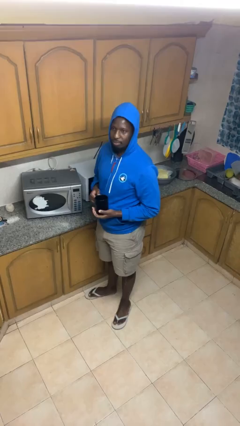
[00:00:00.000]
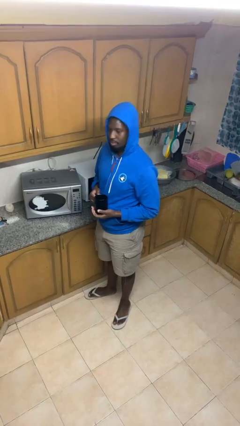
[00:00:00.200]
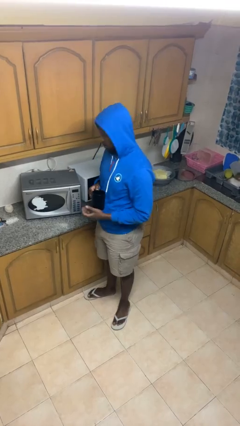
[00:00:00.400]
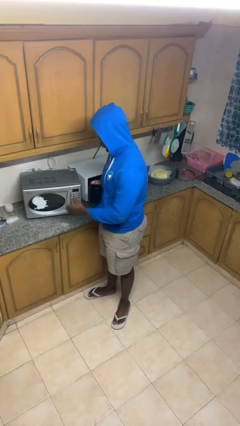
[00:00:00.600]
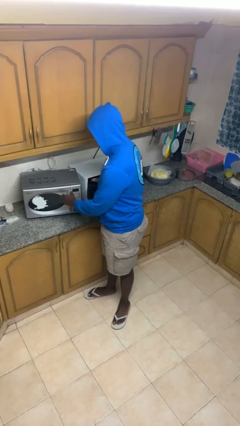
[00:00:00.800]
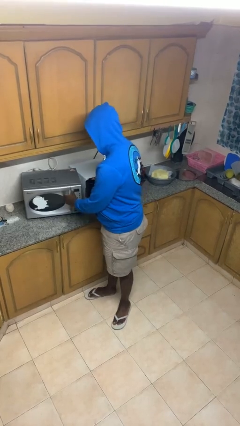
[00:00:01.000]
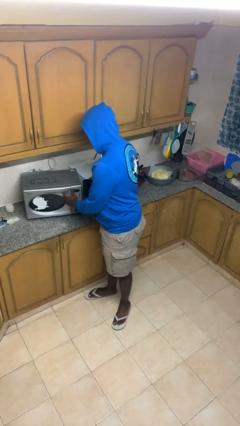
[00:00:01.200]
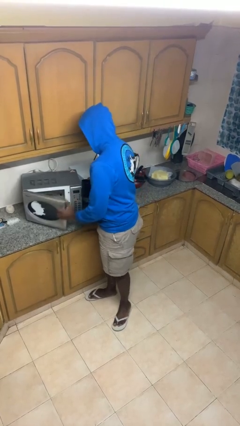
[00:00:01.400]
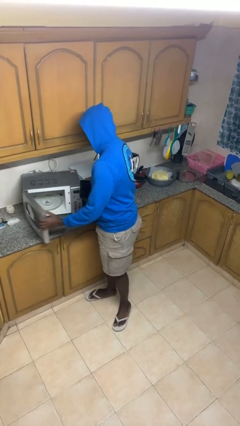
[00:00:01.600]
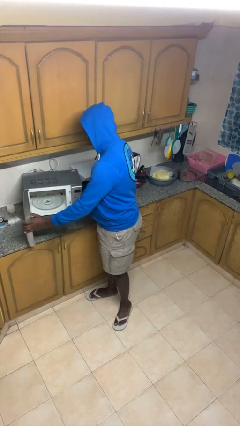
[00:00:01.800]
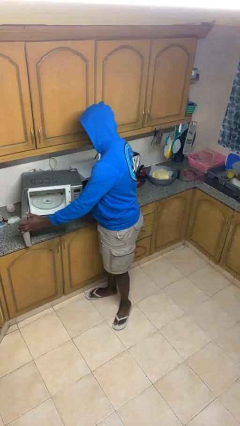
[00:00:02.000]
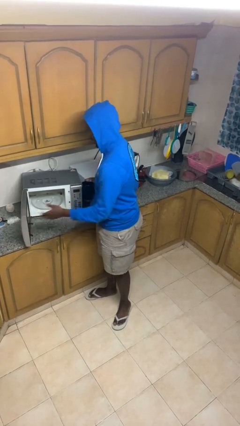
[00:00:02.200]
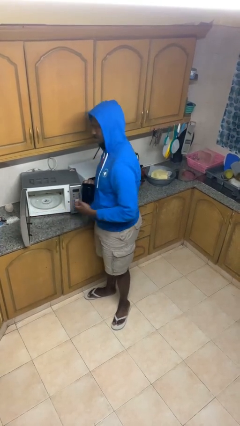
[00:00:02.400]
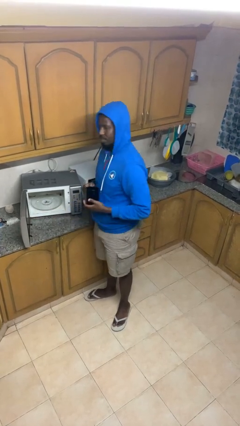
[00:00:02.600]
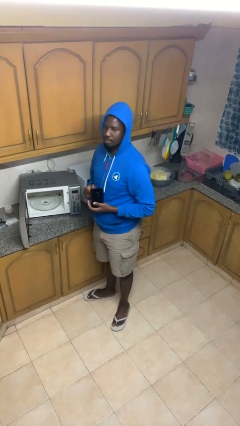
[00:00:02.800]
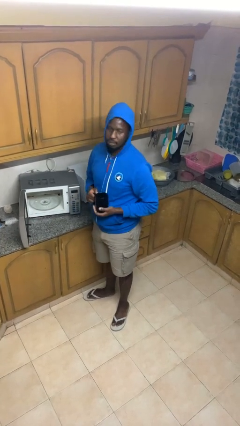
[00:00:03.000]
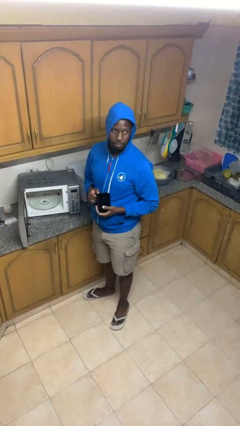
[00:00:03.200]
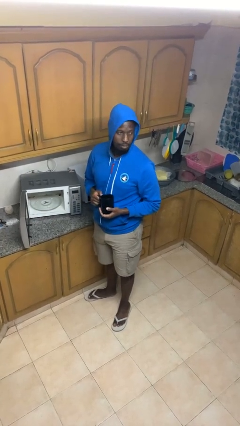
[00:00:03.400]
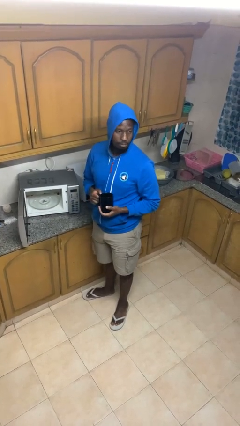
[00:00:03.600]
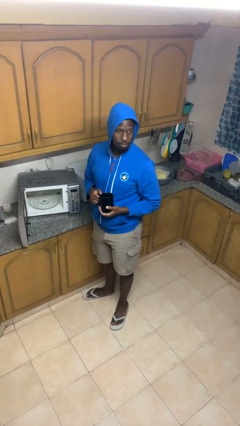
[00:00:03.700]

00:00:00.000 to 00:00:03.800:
person opens microwave

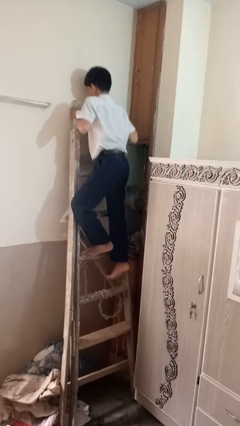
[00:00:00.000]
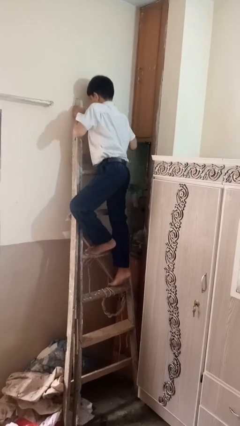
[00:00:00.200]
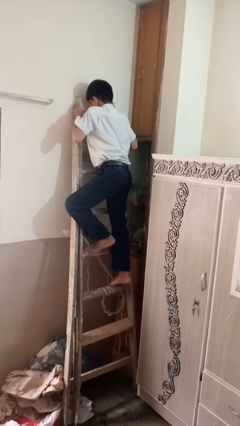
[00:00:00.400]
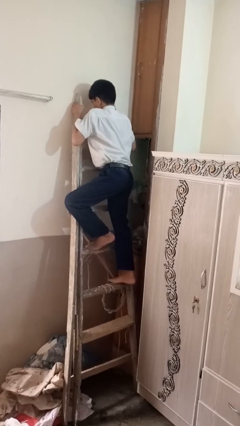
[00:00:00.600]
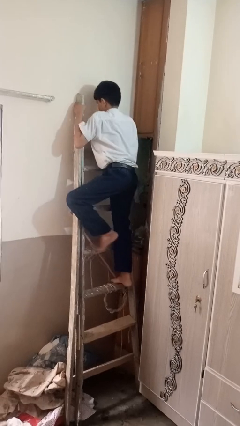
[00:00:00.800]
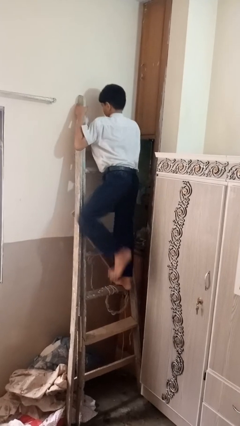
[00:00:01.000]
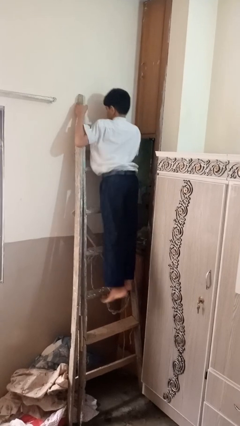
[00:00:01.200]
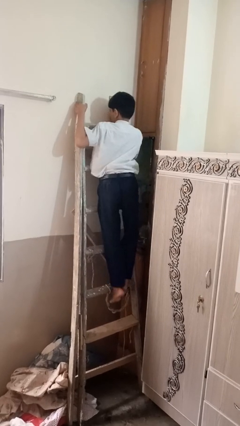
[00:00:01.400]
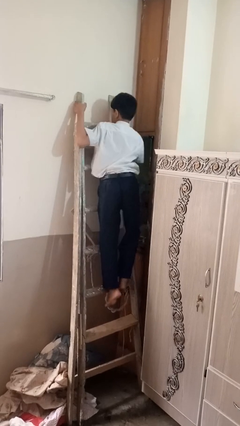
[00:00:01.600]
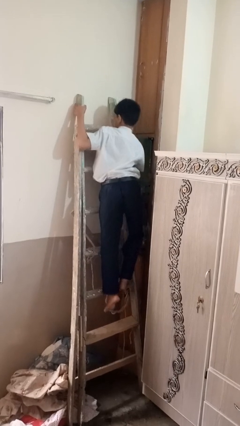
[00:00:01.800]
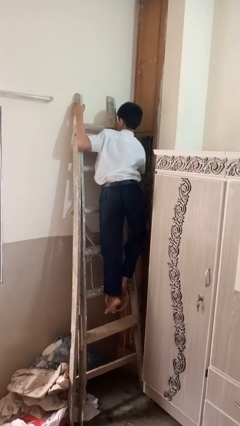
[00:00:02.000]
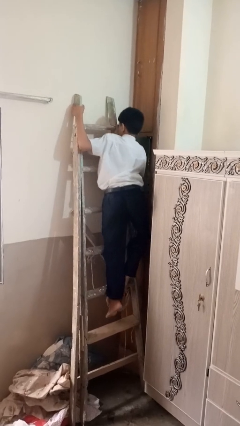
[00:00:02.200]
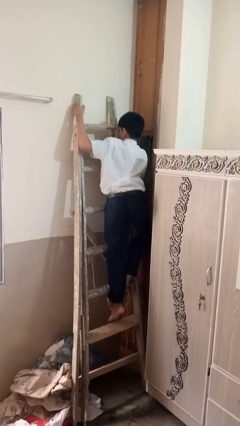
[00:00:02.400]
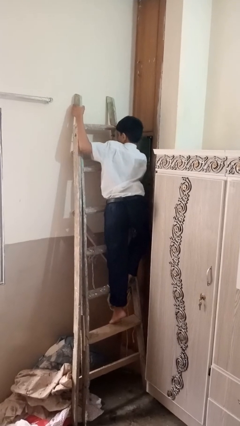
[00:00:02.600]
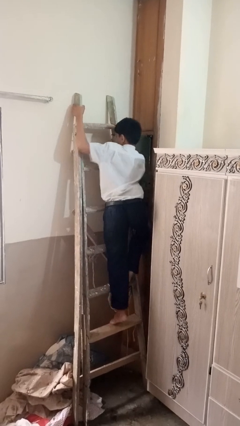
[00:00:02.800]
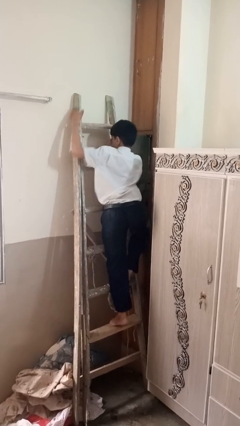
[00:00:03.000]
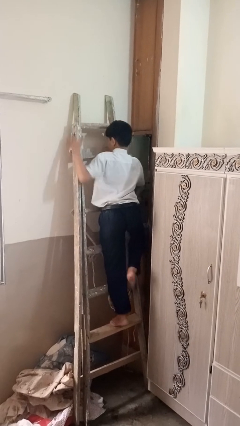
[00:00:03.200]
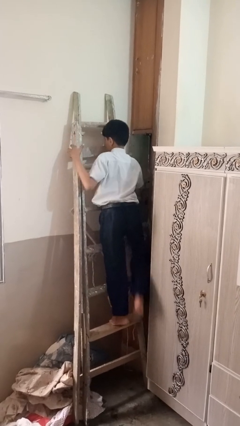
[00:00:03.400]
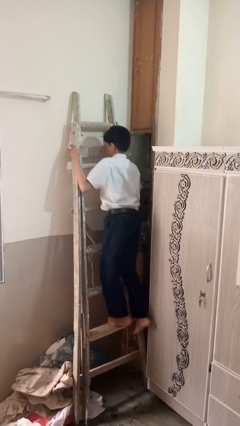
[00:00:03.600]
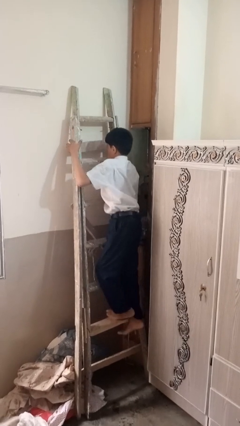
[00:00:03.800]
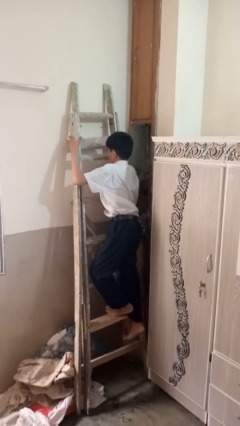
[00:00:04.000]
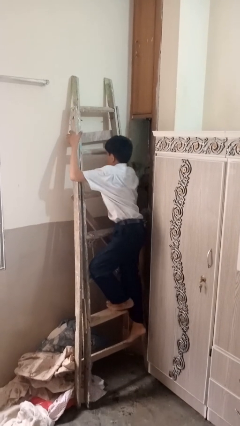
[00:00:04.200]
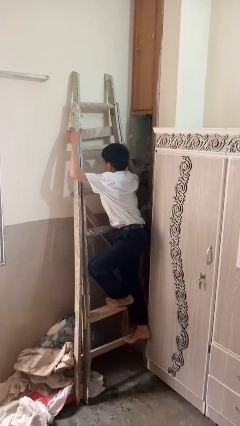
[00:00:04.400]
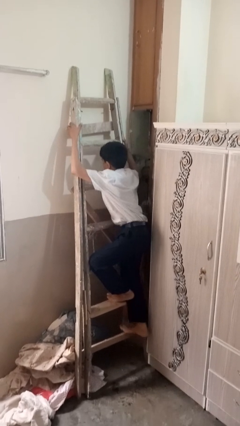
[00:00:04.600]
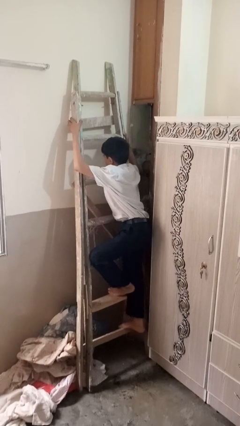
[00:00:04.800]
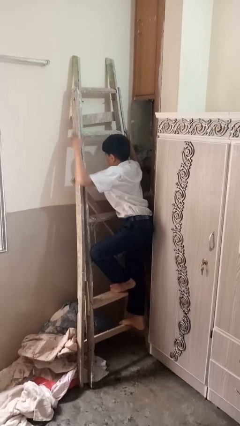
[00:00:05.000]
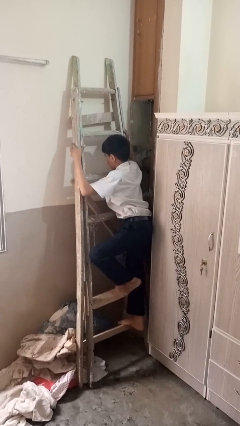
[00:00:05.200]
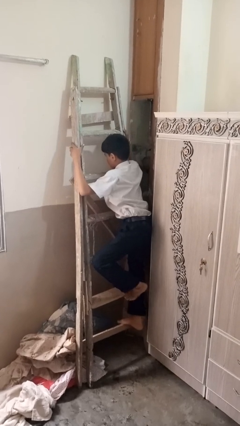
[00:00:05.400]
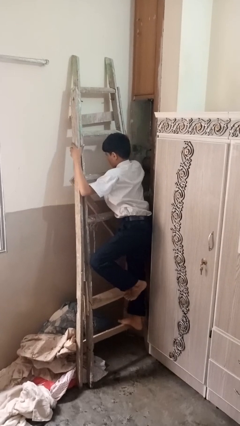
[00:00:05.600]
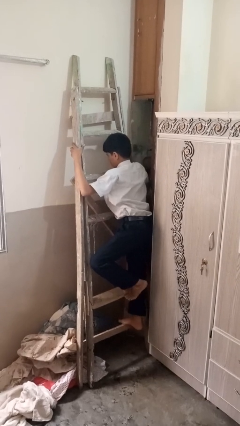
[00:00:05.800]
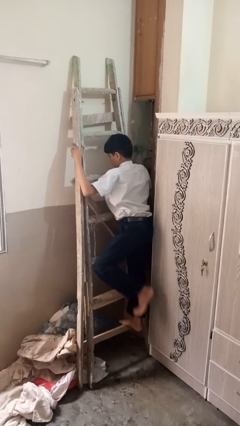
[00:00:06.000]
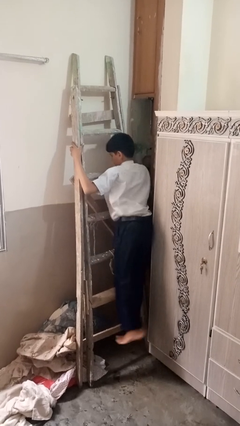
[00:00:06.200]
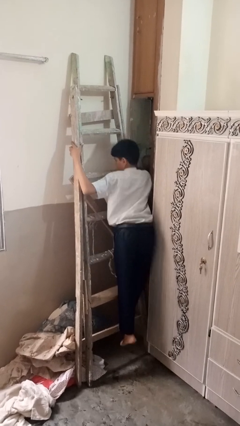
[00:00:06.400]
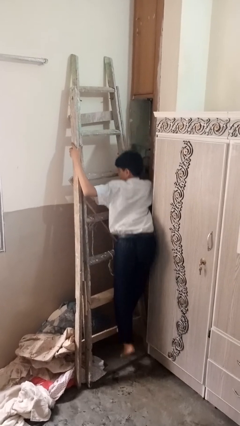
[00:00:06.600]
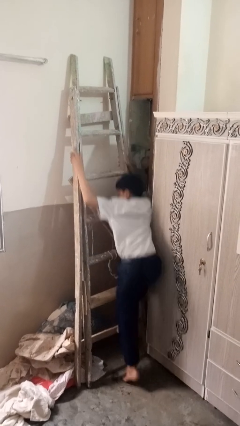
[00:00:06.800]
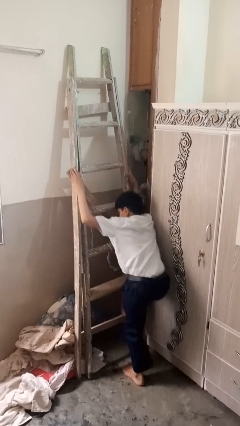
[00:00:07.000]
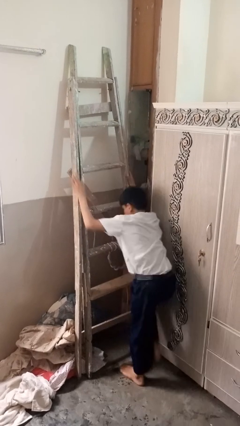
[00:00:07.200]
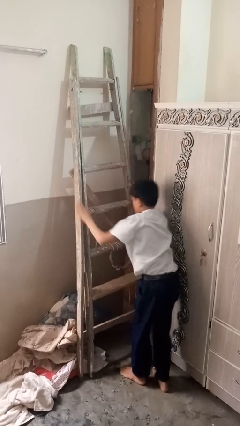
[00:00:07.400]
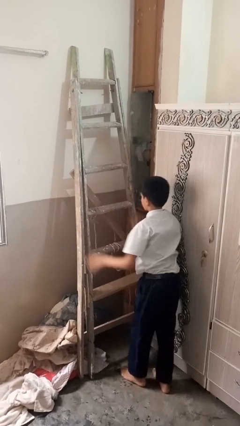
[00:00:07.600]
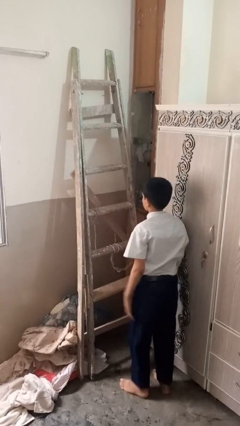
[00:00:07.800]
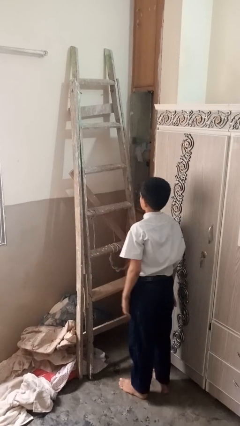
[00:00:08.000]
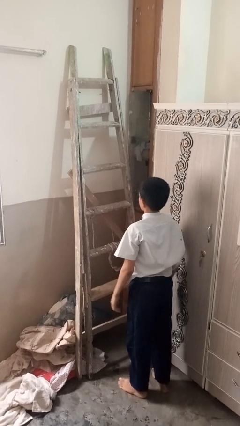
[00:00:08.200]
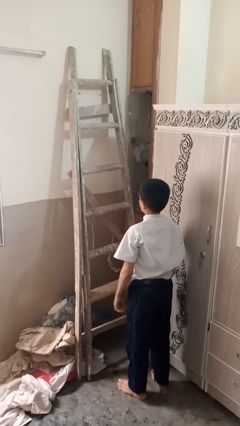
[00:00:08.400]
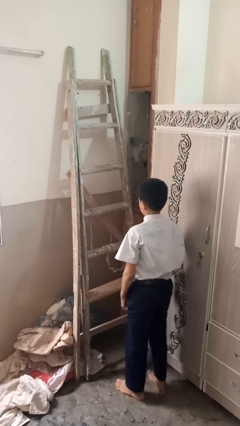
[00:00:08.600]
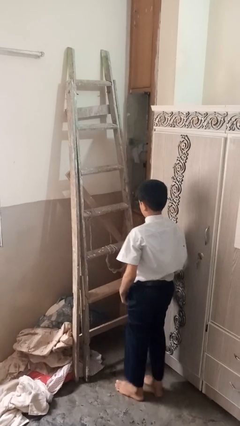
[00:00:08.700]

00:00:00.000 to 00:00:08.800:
person climbs down ladder

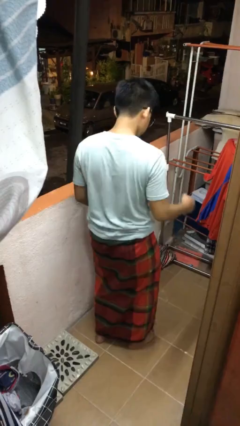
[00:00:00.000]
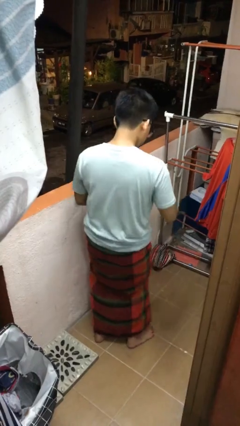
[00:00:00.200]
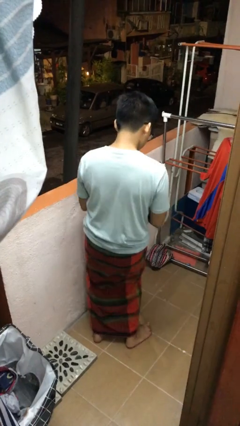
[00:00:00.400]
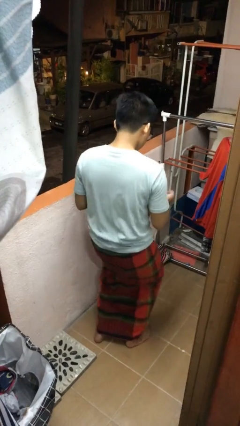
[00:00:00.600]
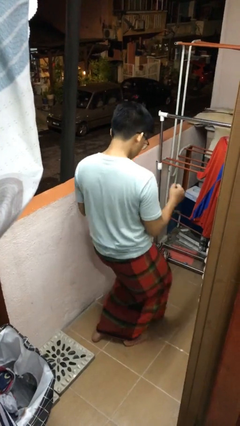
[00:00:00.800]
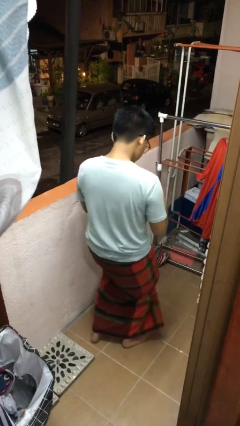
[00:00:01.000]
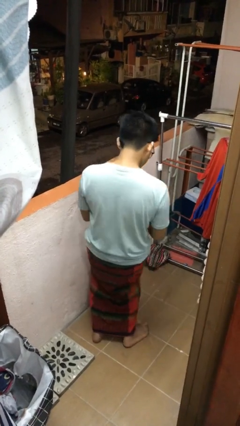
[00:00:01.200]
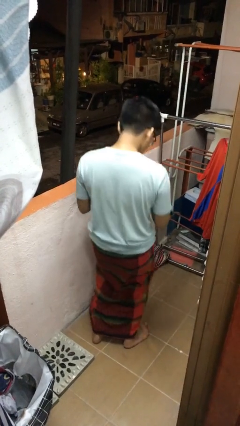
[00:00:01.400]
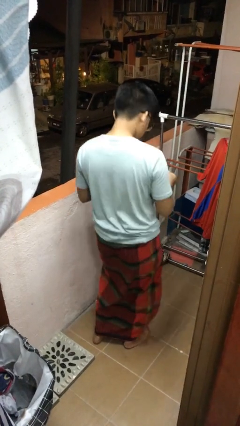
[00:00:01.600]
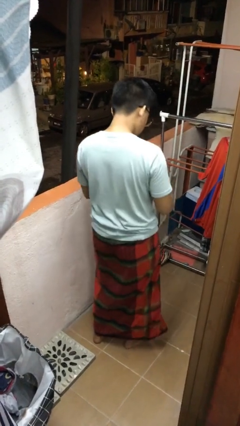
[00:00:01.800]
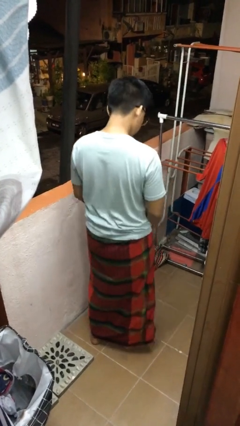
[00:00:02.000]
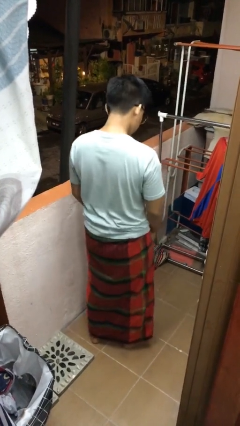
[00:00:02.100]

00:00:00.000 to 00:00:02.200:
person dances in place

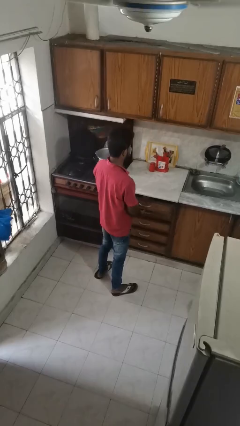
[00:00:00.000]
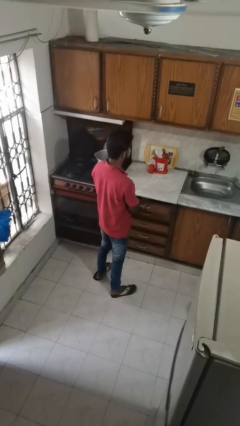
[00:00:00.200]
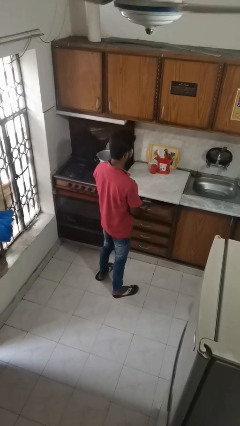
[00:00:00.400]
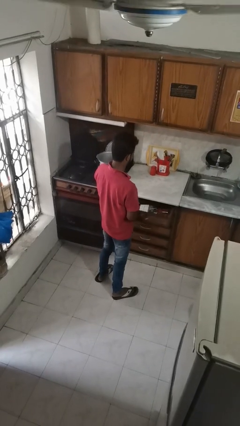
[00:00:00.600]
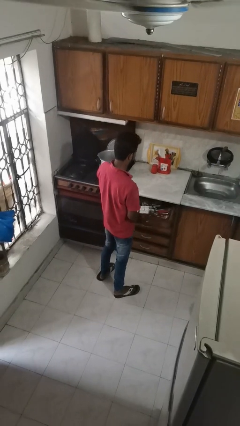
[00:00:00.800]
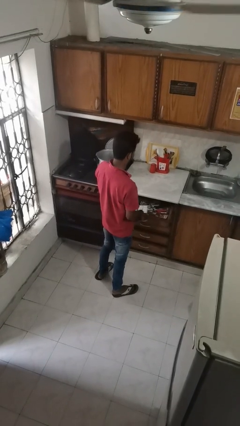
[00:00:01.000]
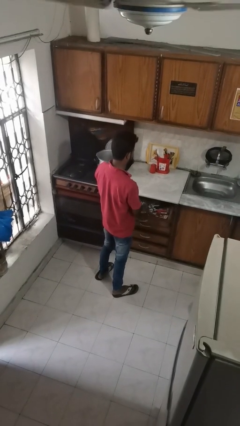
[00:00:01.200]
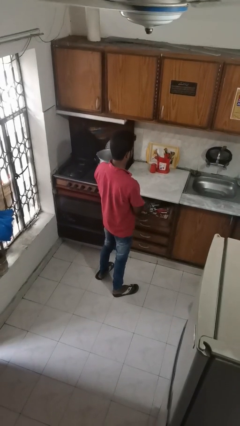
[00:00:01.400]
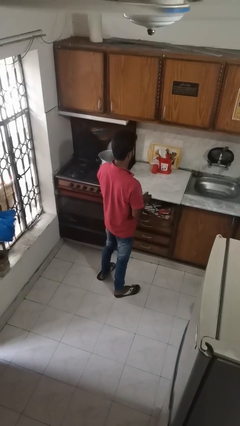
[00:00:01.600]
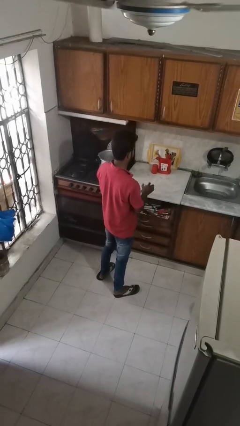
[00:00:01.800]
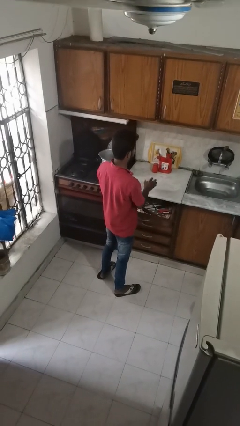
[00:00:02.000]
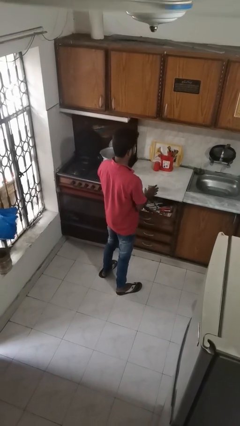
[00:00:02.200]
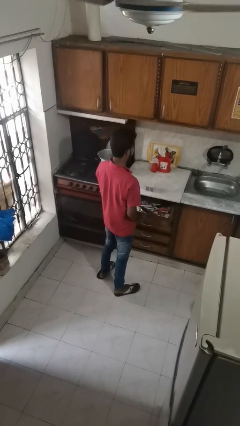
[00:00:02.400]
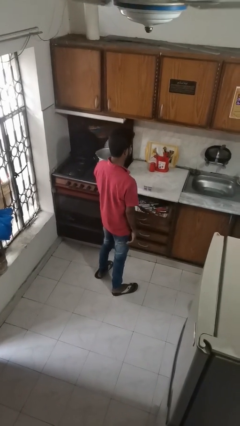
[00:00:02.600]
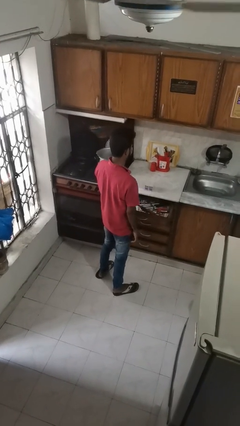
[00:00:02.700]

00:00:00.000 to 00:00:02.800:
person takes object from kitchen drawer
